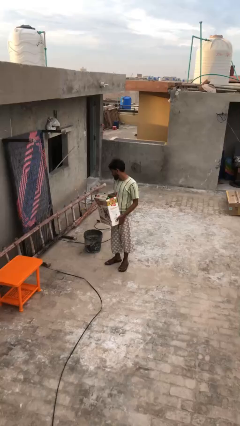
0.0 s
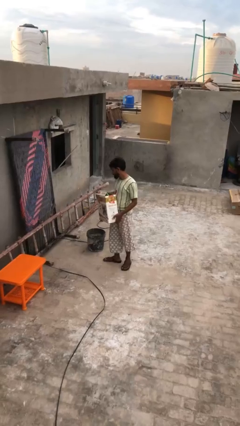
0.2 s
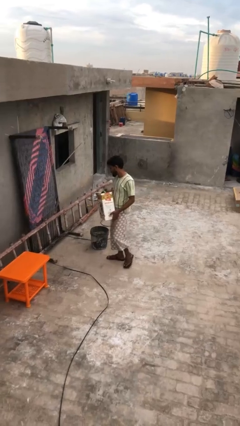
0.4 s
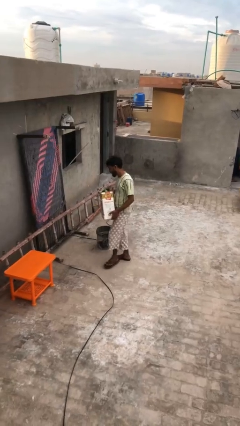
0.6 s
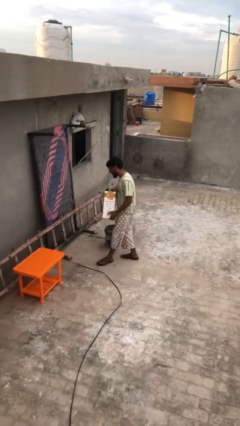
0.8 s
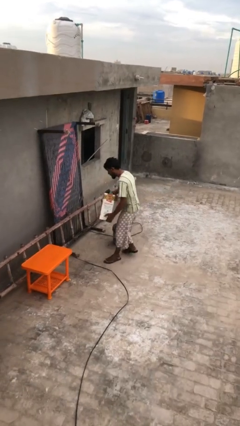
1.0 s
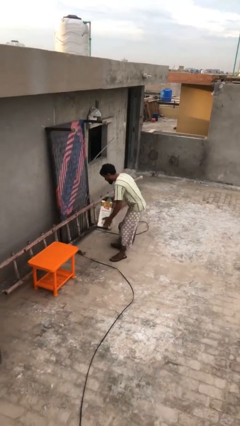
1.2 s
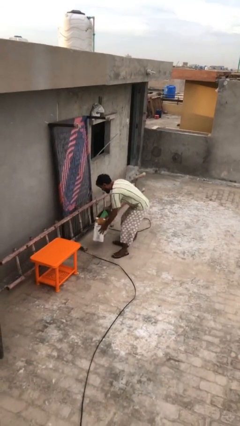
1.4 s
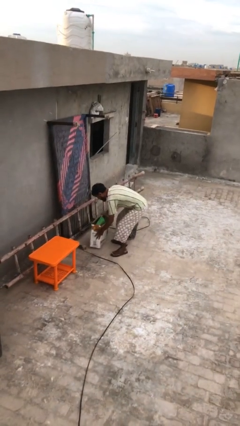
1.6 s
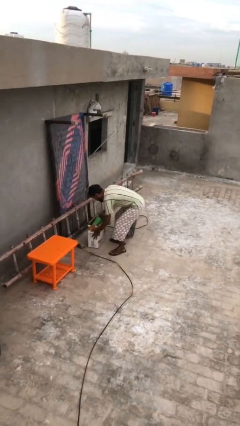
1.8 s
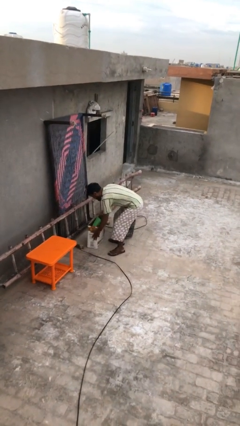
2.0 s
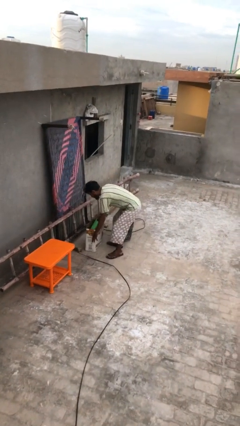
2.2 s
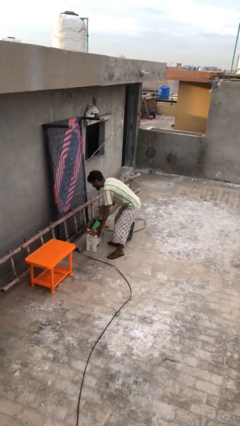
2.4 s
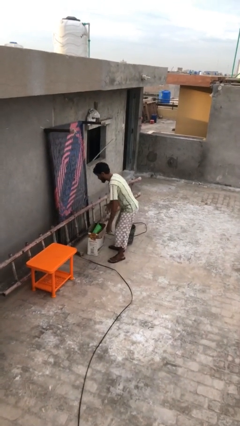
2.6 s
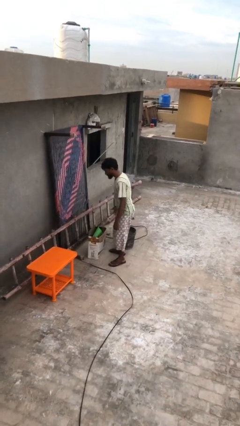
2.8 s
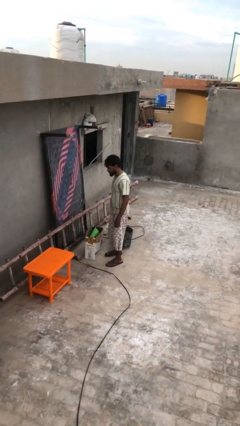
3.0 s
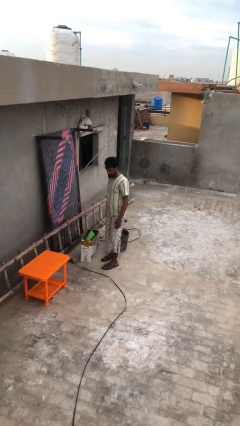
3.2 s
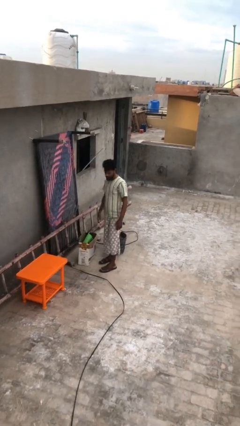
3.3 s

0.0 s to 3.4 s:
person puts down object on floor

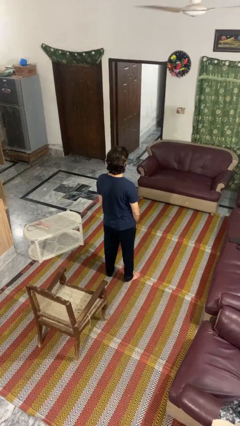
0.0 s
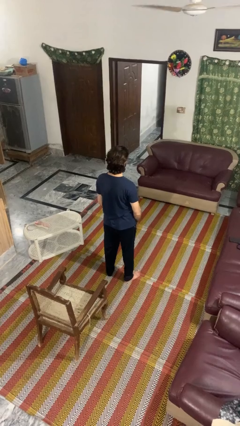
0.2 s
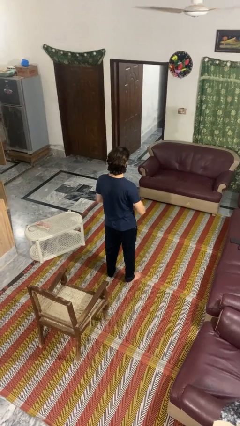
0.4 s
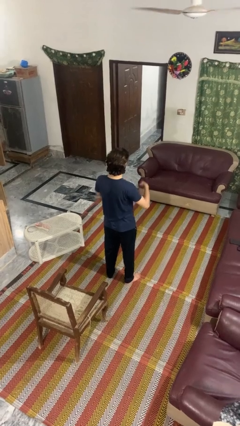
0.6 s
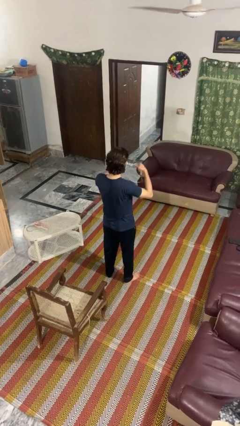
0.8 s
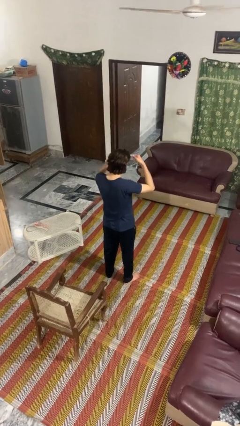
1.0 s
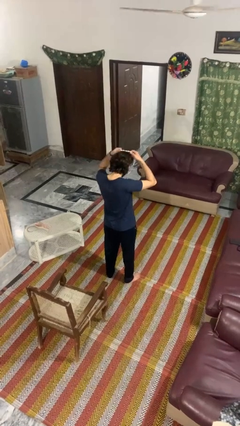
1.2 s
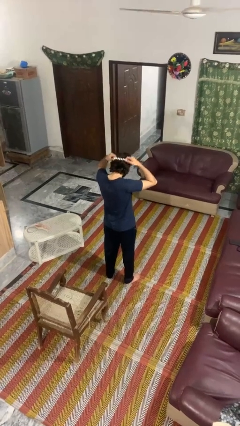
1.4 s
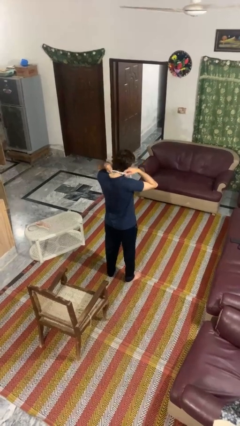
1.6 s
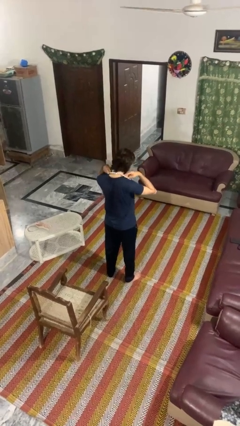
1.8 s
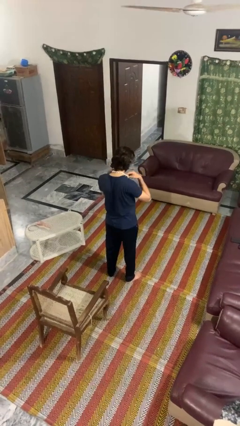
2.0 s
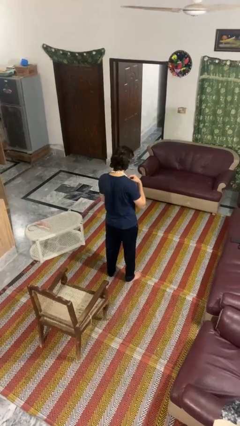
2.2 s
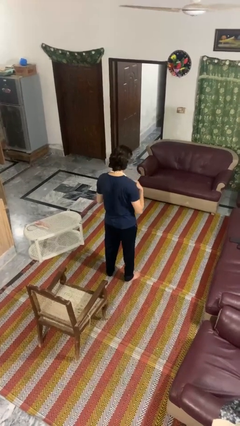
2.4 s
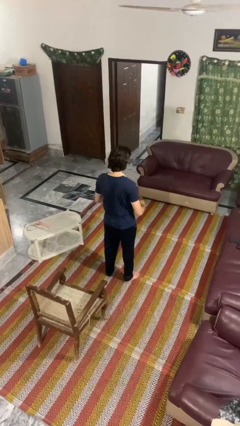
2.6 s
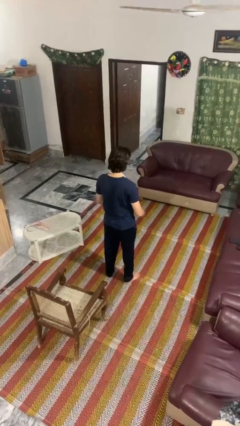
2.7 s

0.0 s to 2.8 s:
person puts on necklace

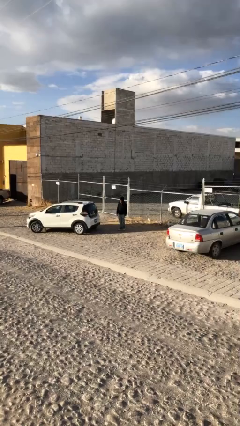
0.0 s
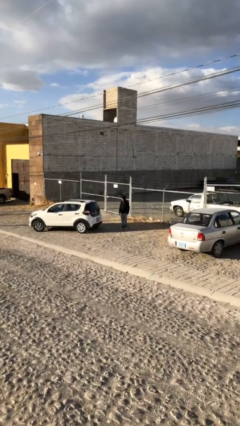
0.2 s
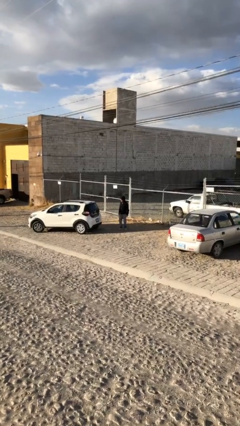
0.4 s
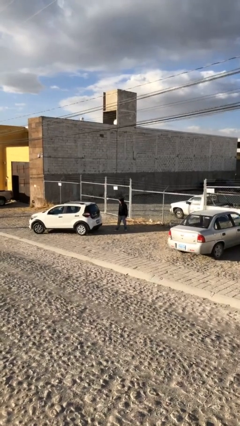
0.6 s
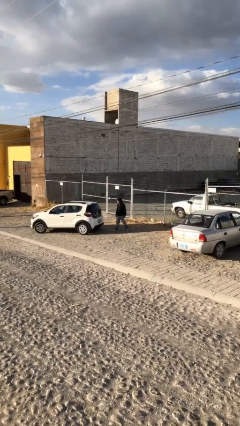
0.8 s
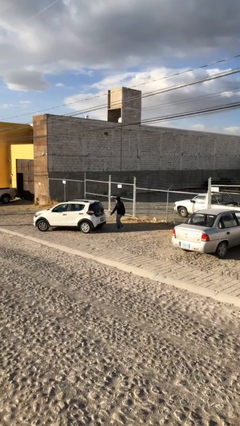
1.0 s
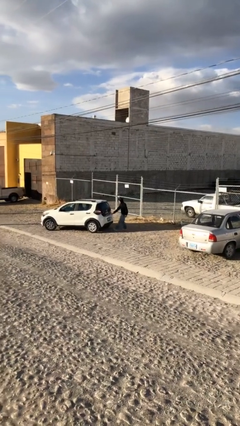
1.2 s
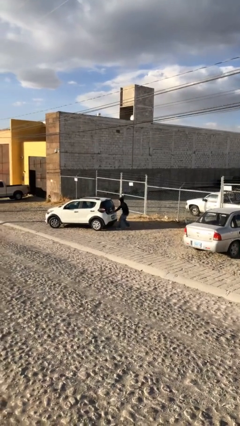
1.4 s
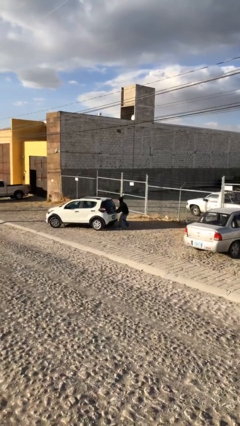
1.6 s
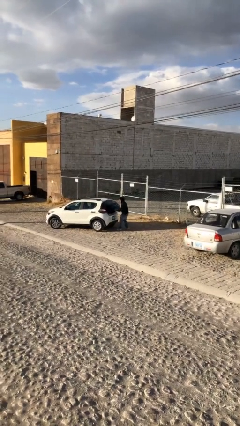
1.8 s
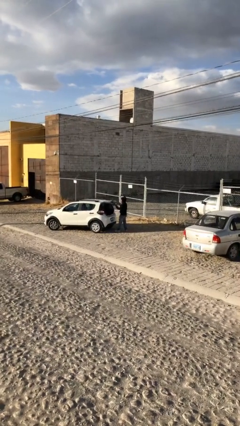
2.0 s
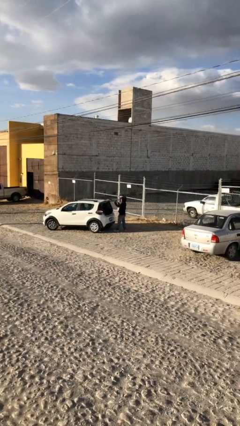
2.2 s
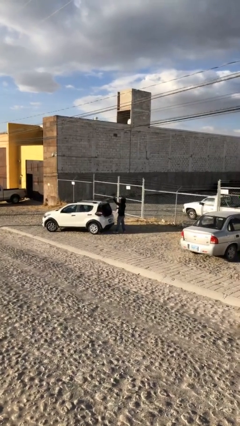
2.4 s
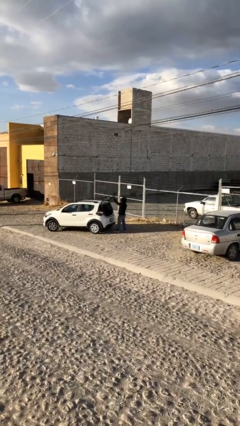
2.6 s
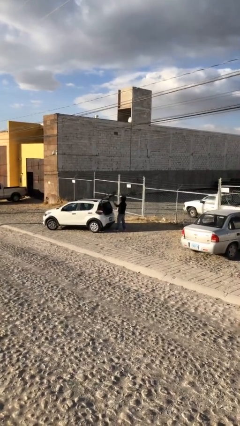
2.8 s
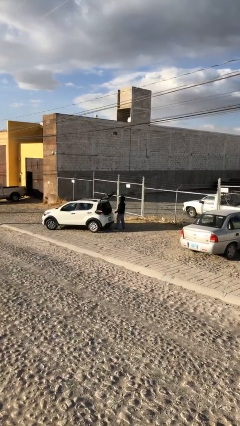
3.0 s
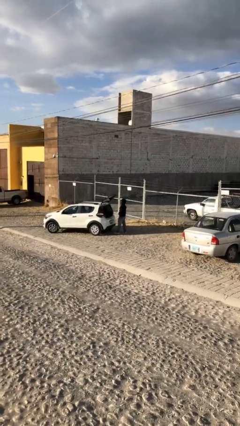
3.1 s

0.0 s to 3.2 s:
person opens car trunk

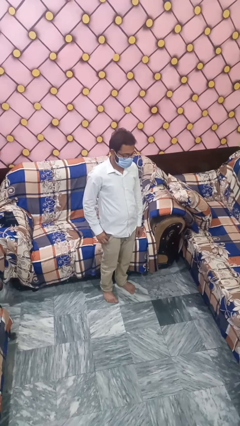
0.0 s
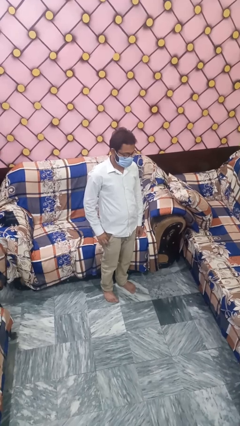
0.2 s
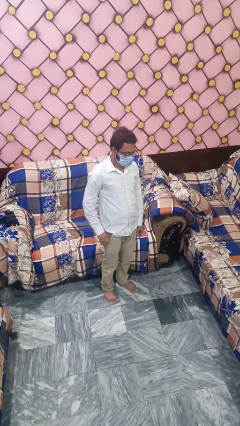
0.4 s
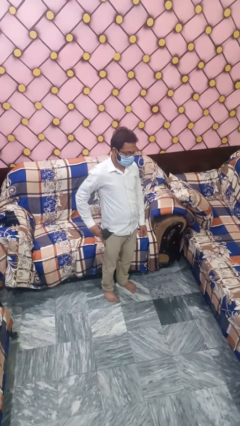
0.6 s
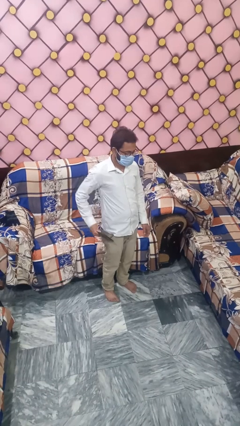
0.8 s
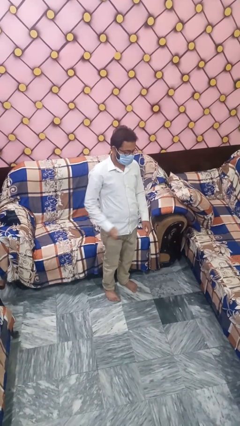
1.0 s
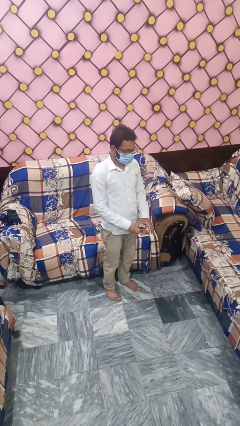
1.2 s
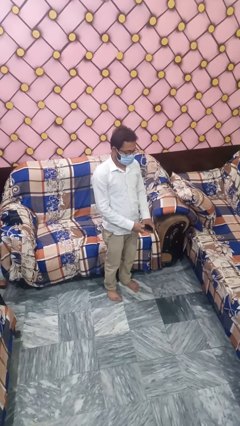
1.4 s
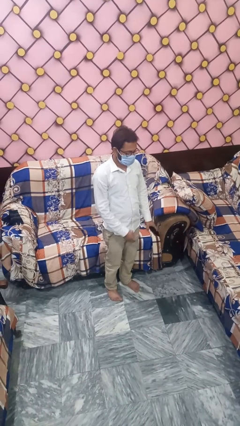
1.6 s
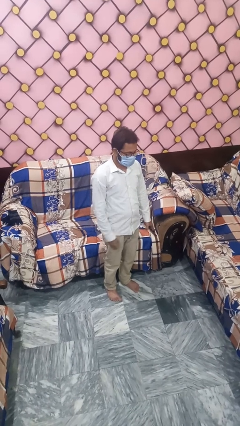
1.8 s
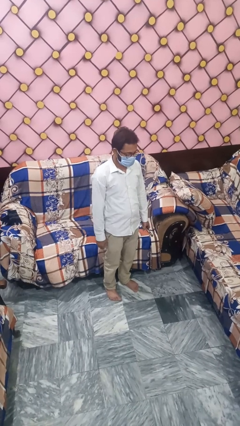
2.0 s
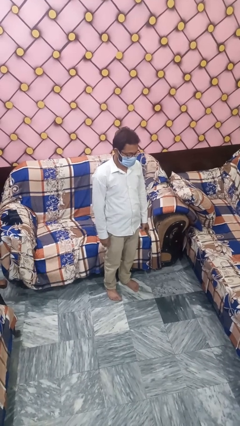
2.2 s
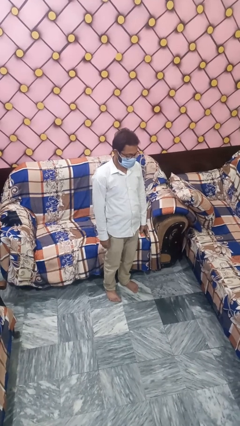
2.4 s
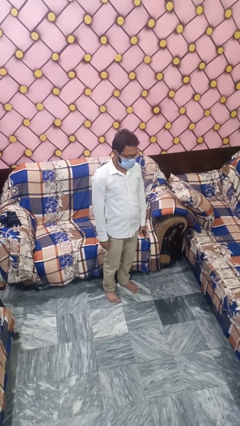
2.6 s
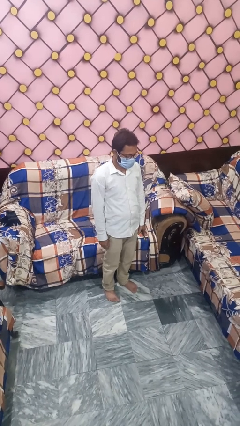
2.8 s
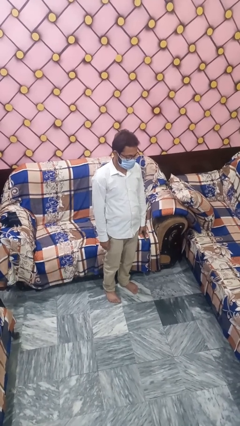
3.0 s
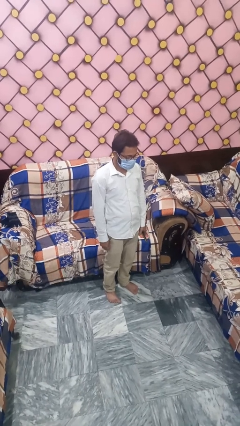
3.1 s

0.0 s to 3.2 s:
person puts phone into pocket

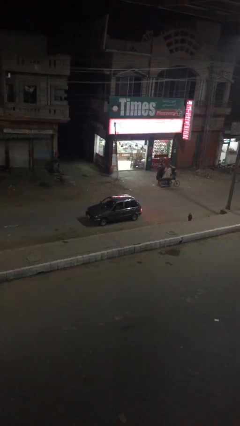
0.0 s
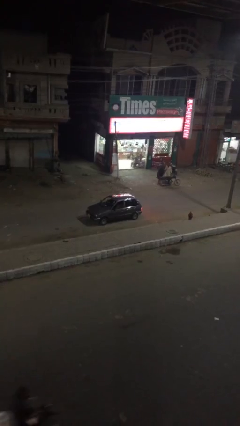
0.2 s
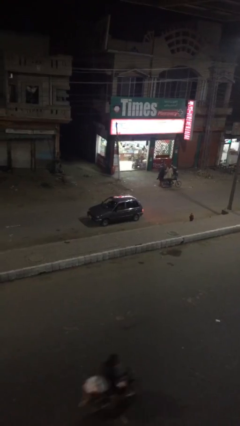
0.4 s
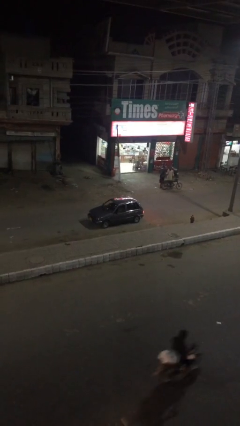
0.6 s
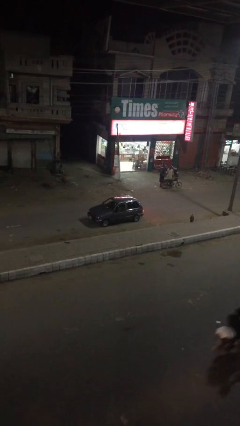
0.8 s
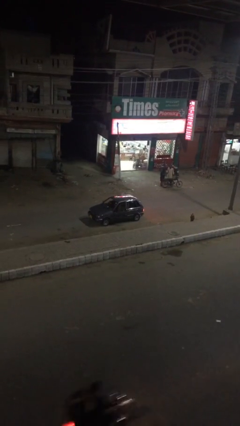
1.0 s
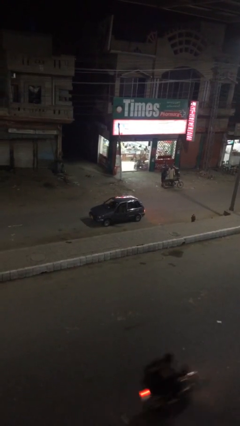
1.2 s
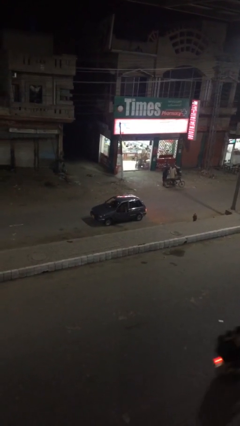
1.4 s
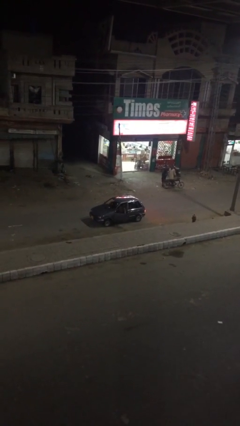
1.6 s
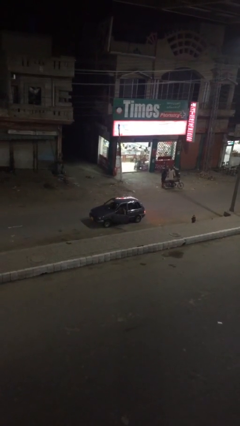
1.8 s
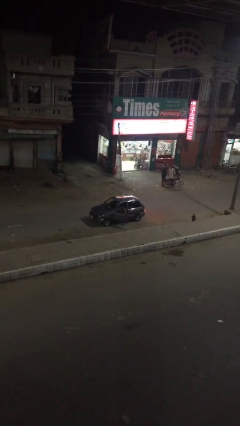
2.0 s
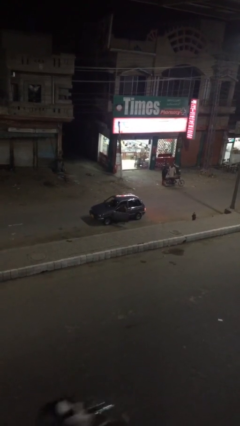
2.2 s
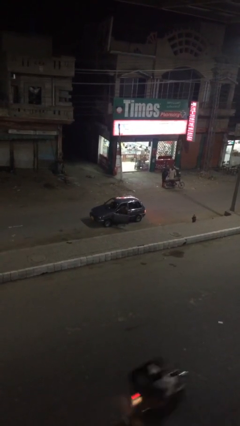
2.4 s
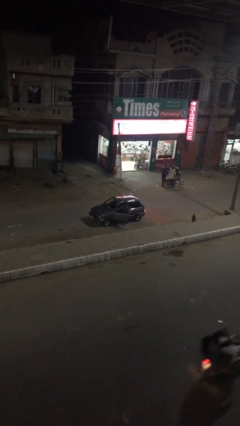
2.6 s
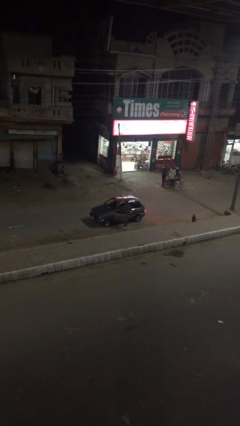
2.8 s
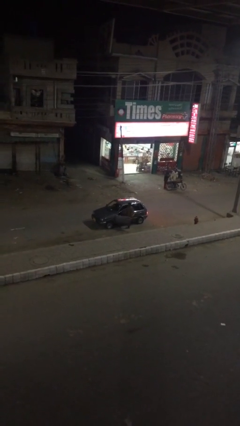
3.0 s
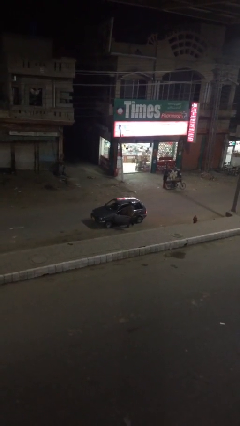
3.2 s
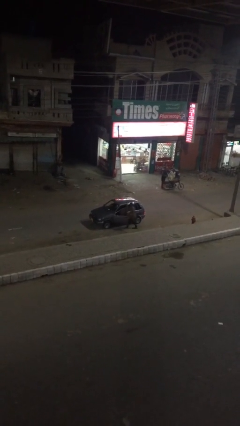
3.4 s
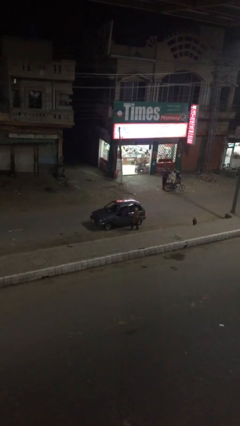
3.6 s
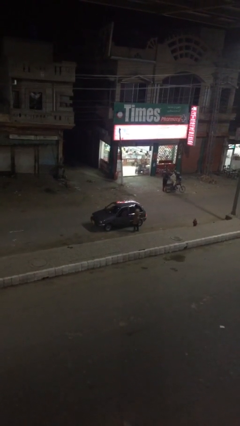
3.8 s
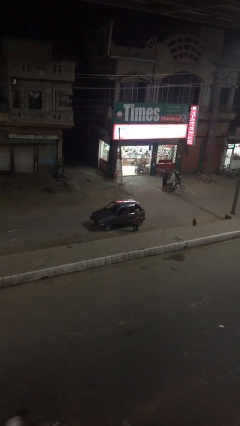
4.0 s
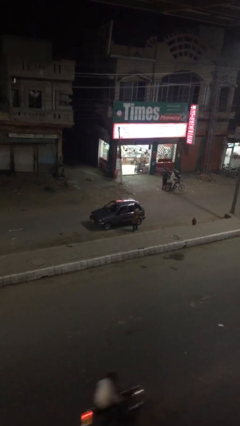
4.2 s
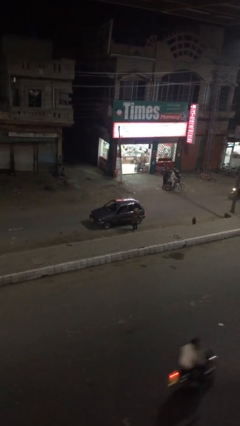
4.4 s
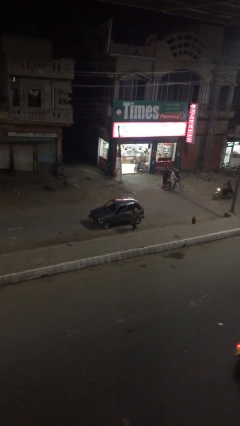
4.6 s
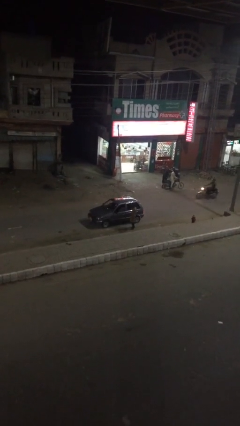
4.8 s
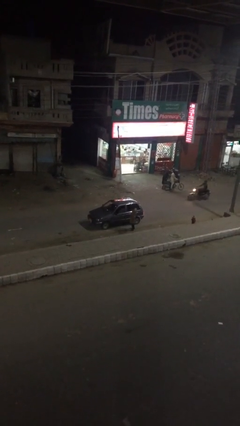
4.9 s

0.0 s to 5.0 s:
car drops off person
